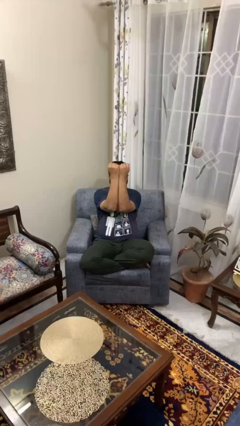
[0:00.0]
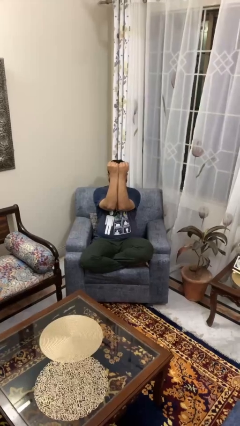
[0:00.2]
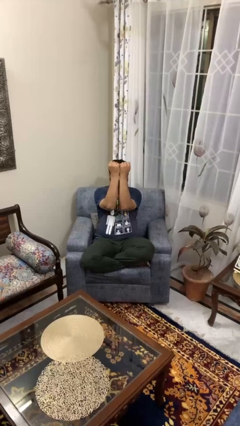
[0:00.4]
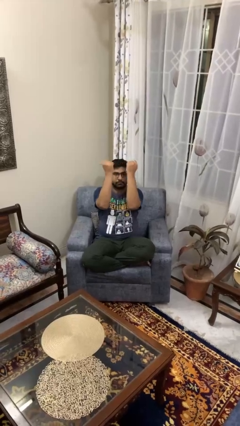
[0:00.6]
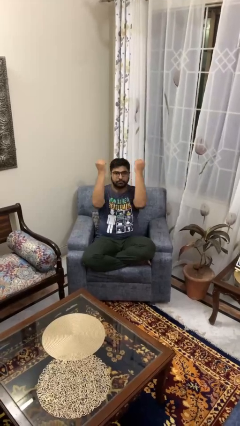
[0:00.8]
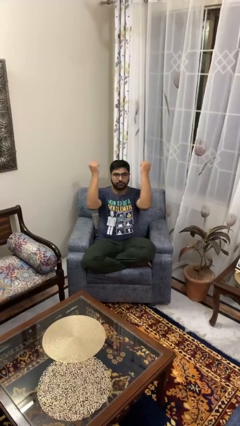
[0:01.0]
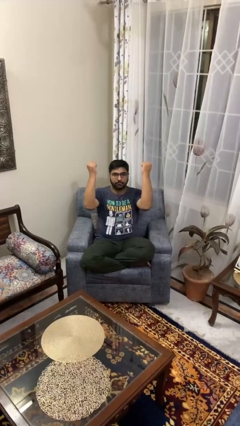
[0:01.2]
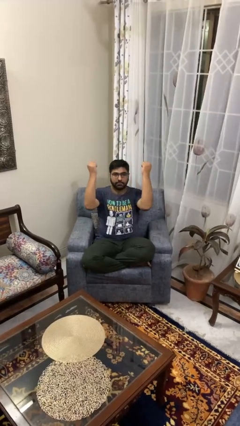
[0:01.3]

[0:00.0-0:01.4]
person gestures zoom out

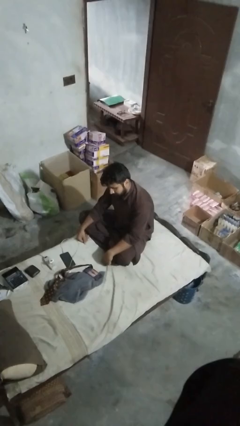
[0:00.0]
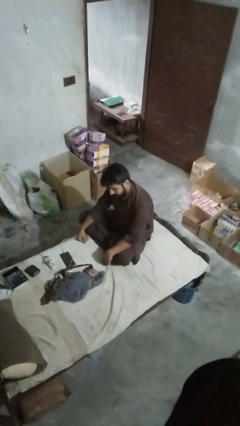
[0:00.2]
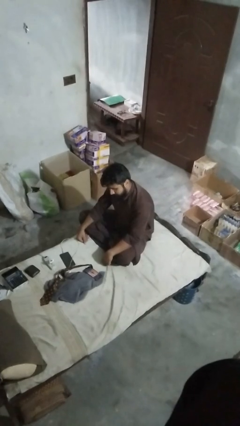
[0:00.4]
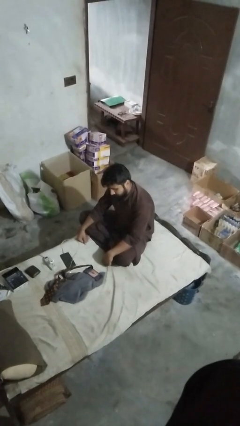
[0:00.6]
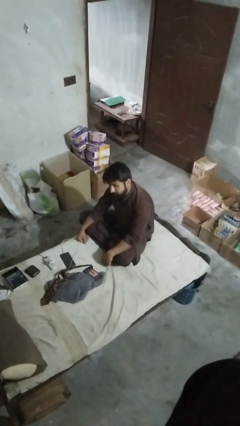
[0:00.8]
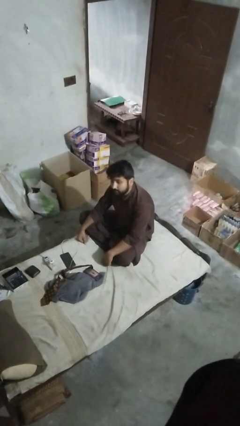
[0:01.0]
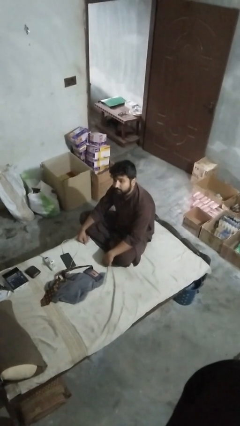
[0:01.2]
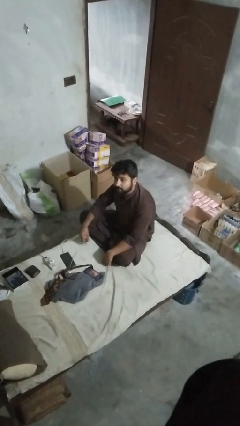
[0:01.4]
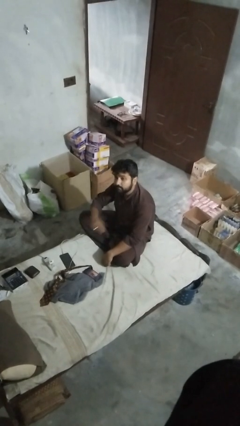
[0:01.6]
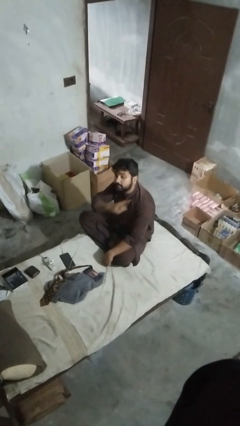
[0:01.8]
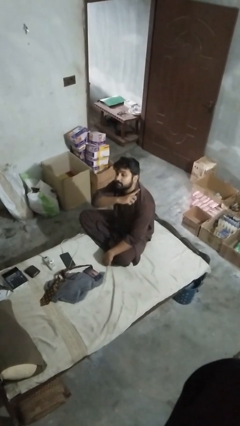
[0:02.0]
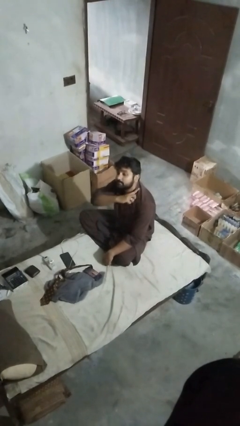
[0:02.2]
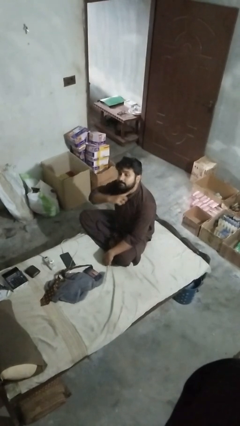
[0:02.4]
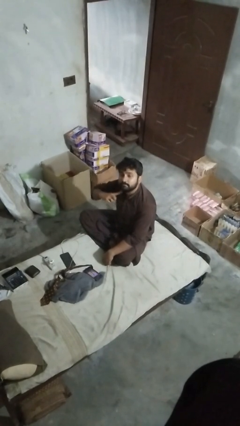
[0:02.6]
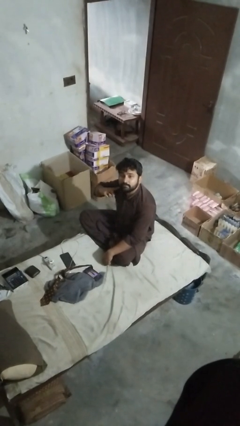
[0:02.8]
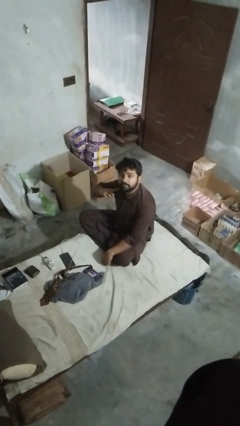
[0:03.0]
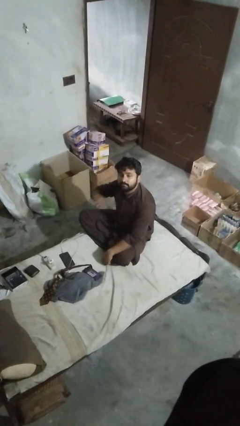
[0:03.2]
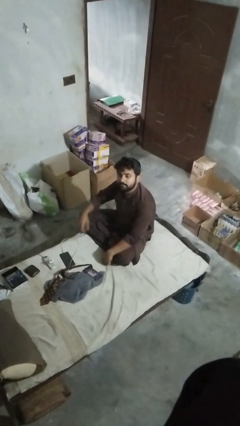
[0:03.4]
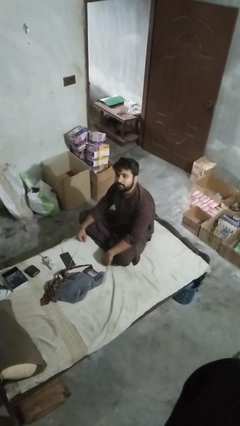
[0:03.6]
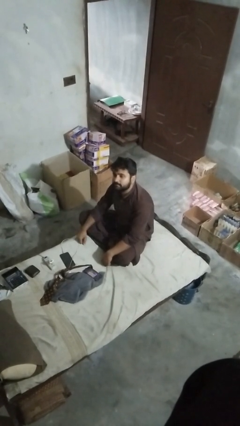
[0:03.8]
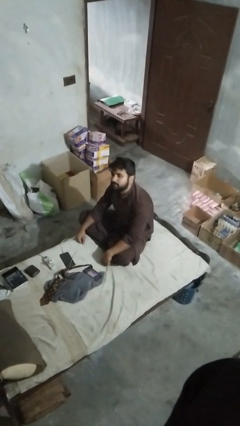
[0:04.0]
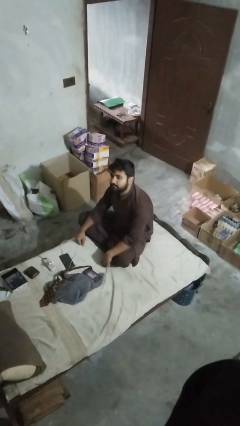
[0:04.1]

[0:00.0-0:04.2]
person gestures cut

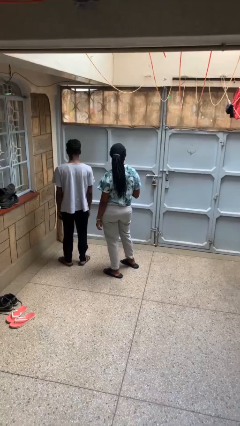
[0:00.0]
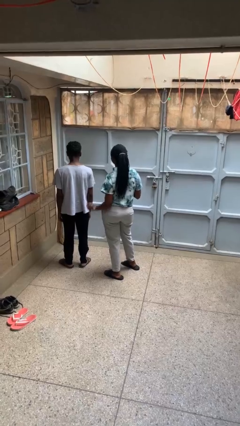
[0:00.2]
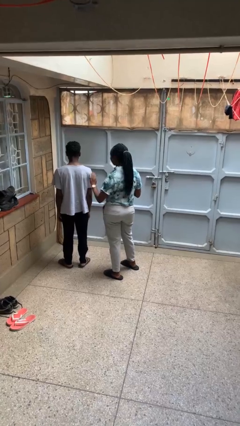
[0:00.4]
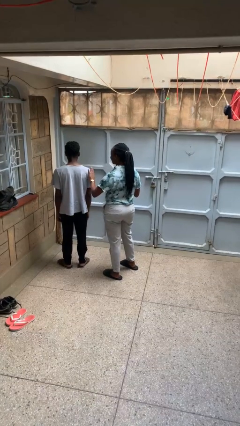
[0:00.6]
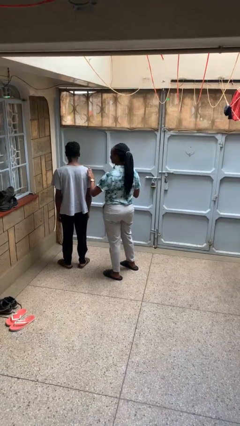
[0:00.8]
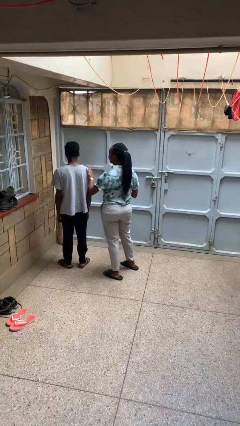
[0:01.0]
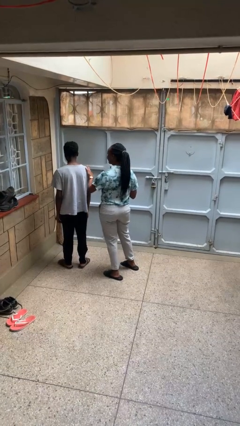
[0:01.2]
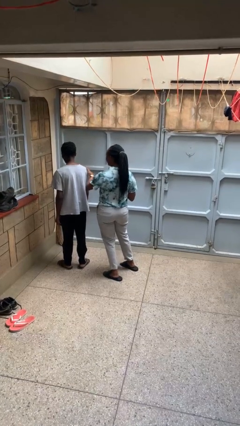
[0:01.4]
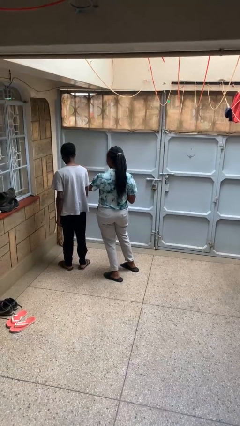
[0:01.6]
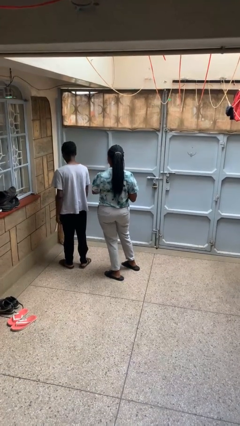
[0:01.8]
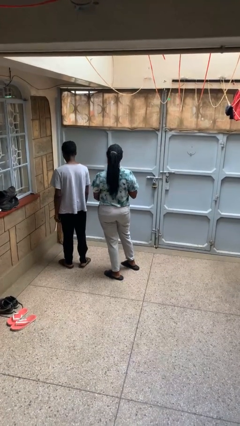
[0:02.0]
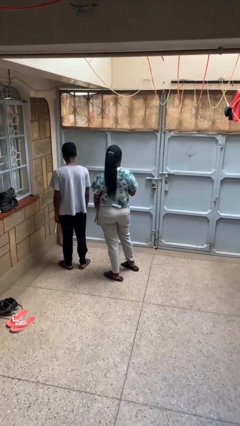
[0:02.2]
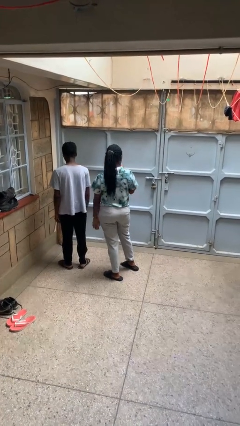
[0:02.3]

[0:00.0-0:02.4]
person shoves person

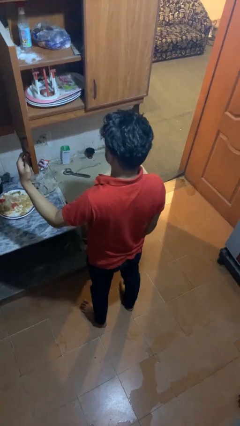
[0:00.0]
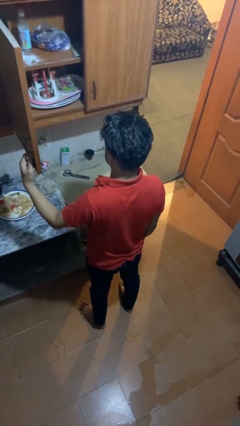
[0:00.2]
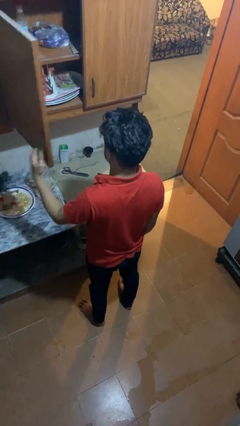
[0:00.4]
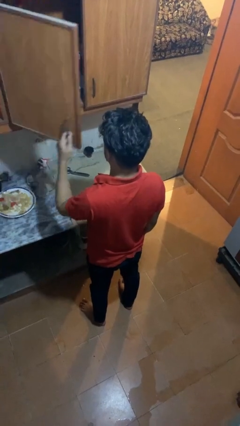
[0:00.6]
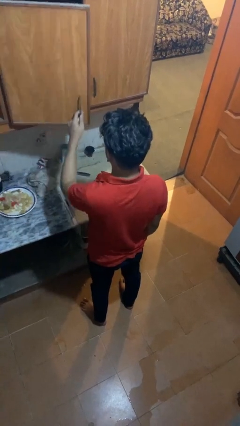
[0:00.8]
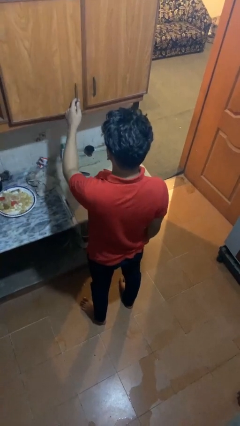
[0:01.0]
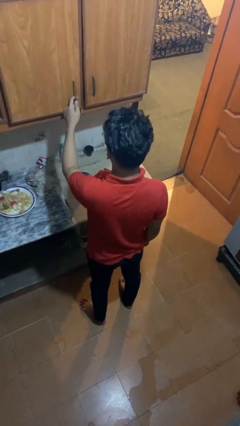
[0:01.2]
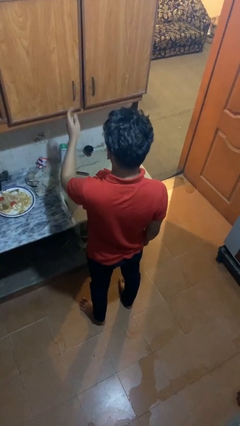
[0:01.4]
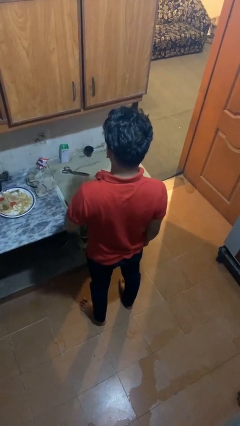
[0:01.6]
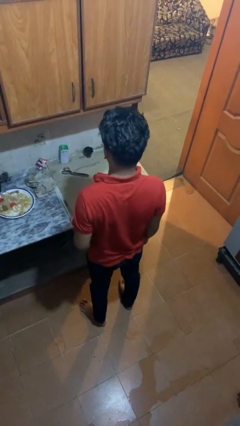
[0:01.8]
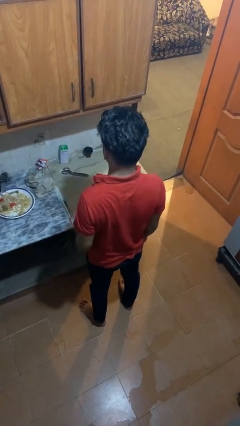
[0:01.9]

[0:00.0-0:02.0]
person closes cabinet

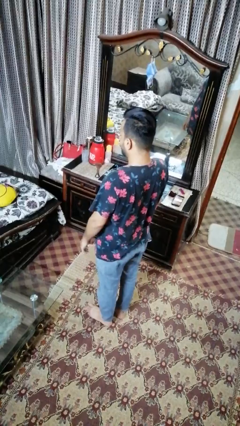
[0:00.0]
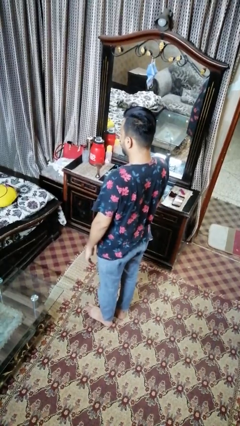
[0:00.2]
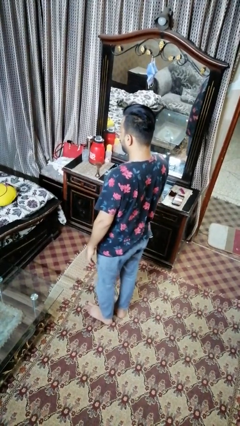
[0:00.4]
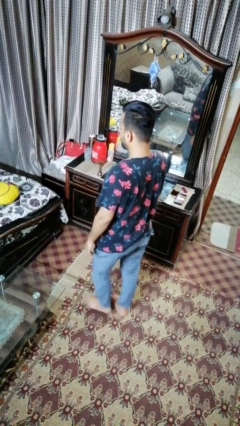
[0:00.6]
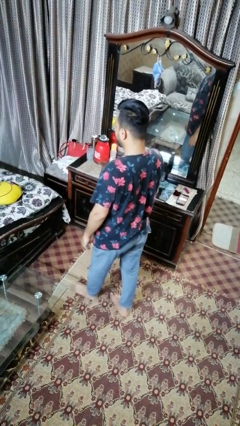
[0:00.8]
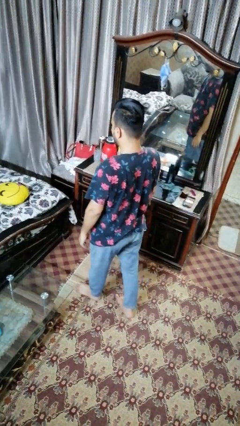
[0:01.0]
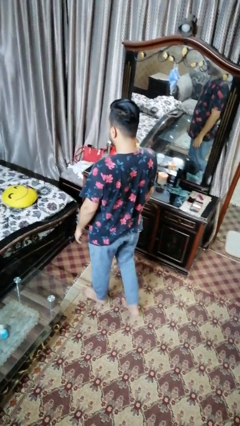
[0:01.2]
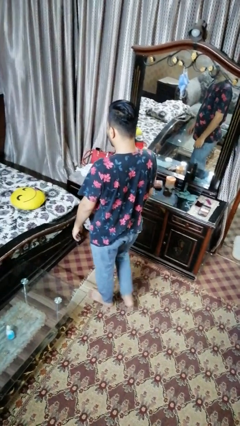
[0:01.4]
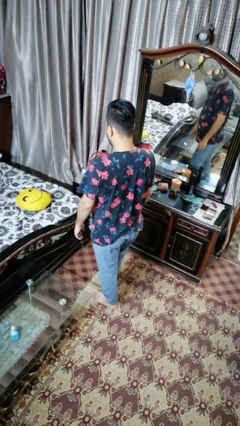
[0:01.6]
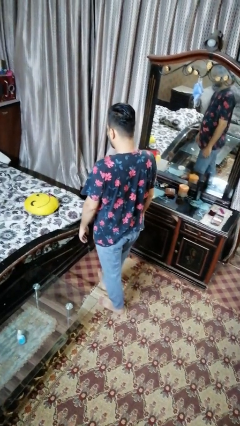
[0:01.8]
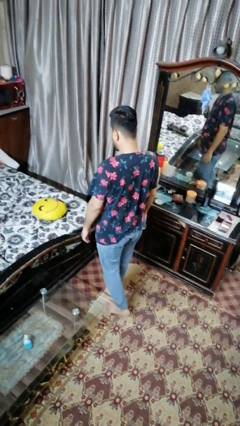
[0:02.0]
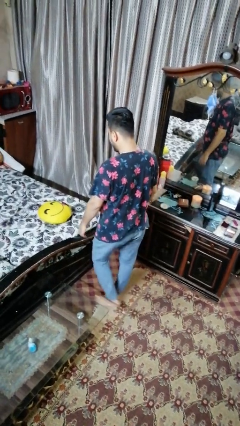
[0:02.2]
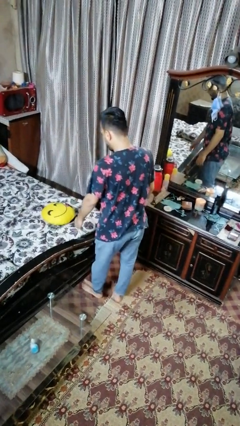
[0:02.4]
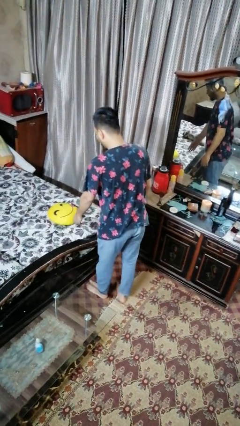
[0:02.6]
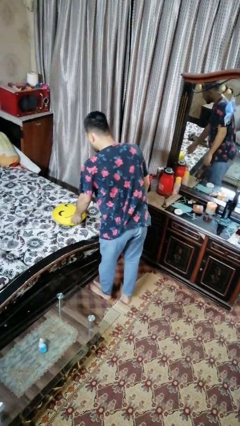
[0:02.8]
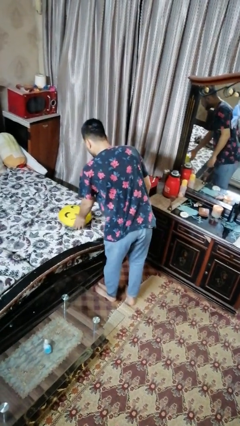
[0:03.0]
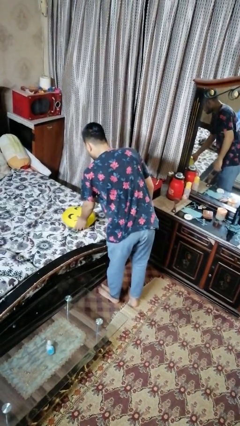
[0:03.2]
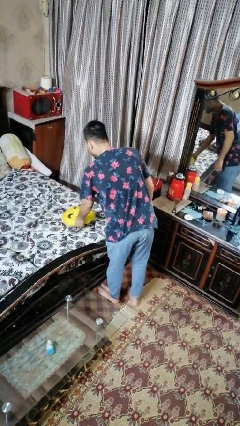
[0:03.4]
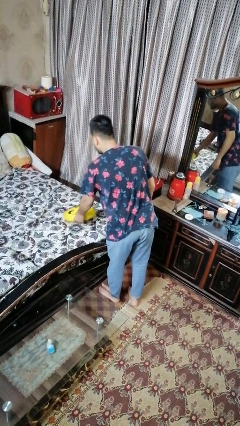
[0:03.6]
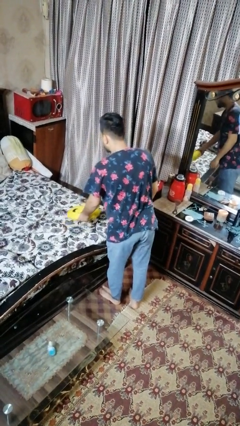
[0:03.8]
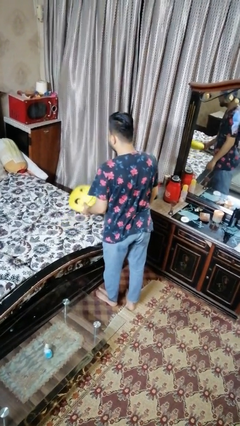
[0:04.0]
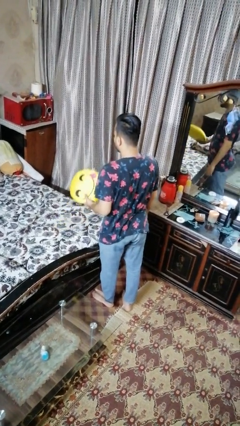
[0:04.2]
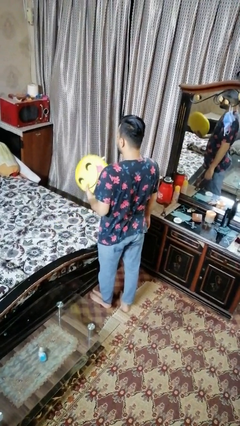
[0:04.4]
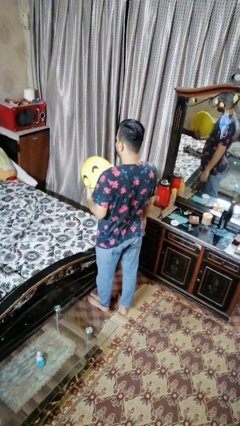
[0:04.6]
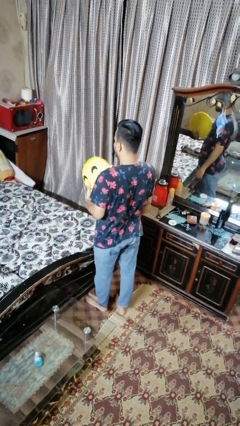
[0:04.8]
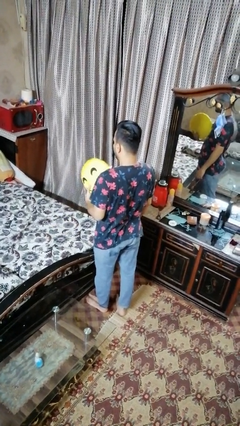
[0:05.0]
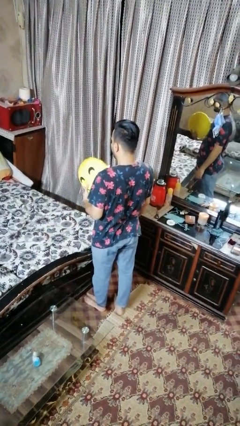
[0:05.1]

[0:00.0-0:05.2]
person picks up object from bed

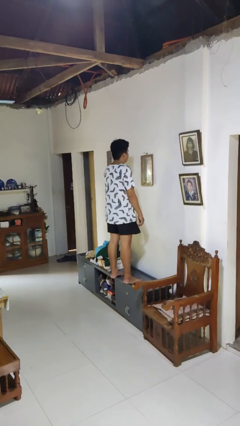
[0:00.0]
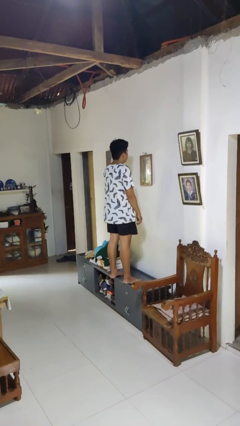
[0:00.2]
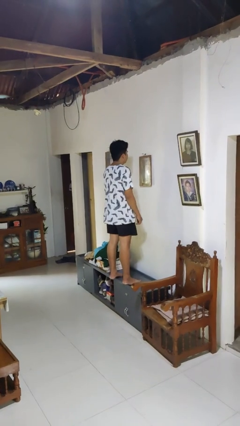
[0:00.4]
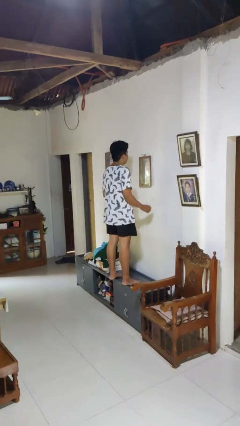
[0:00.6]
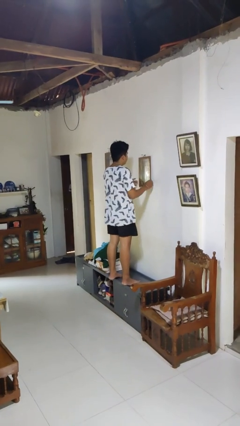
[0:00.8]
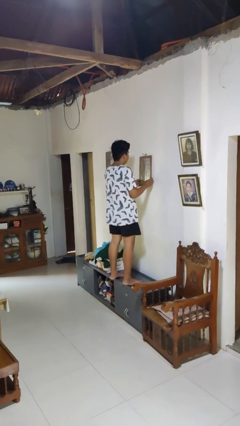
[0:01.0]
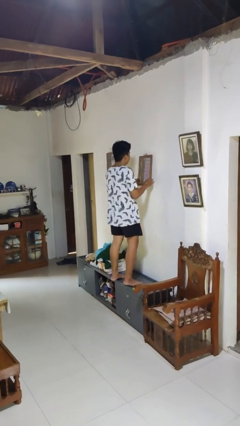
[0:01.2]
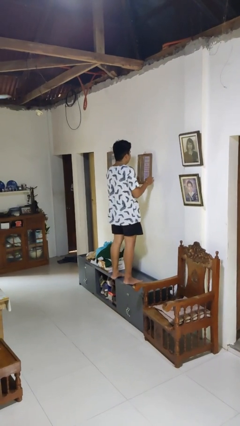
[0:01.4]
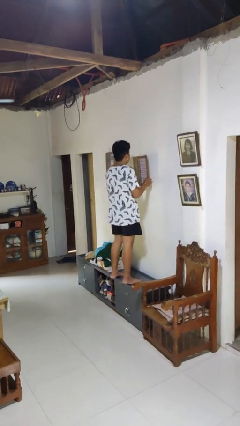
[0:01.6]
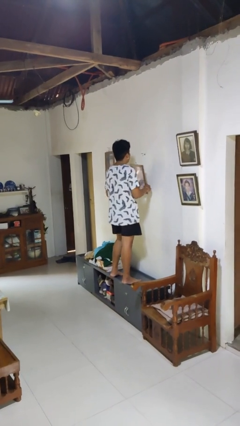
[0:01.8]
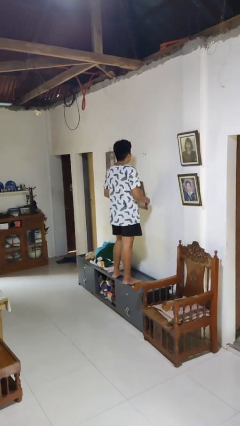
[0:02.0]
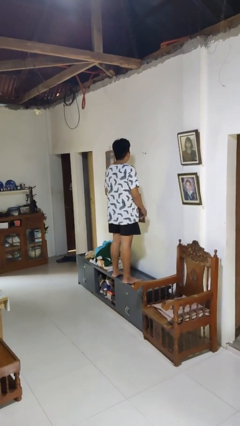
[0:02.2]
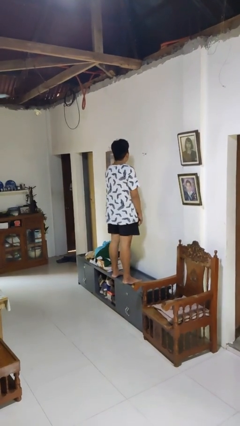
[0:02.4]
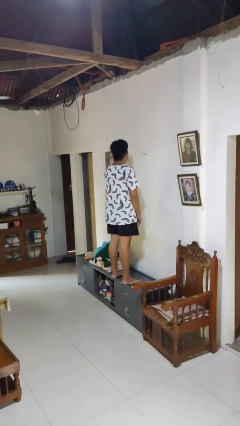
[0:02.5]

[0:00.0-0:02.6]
person takes down picture frame
